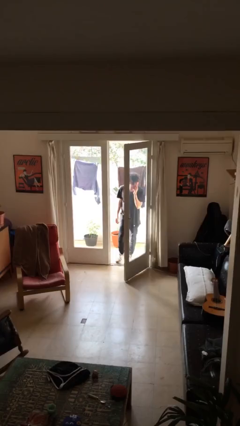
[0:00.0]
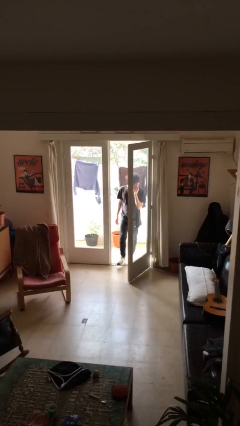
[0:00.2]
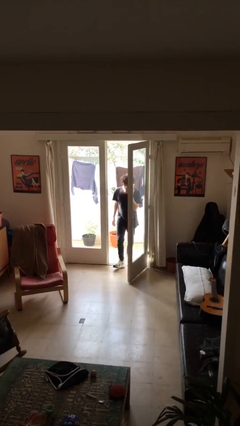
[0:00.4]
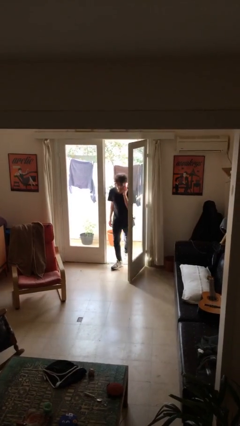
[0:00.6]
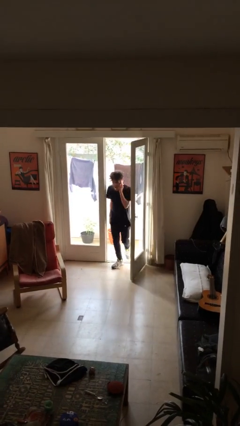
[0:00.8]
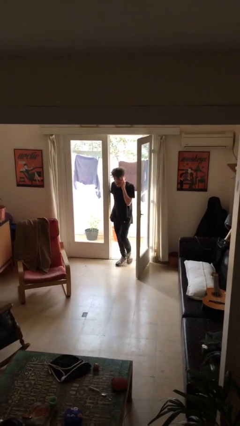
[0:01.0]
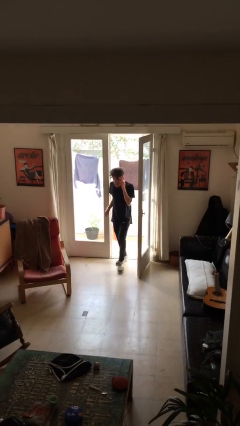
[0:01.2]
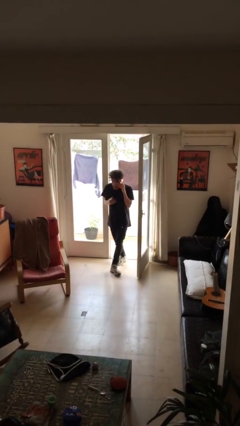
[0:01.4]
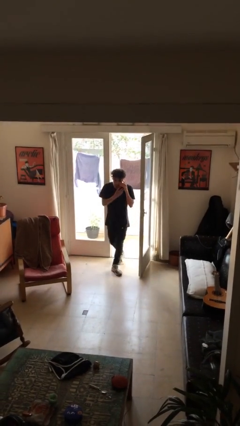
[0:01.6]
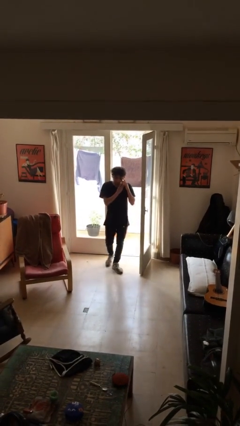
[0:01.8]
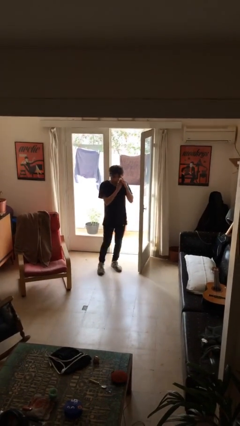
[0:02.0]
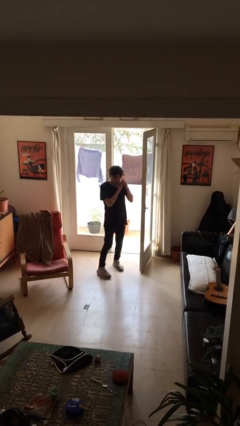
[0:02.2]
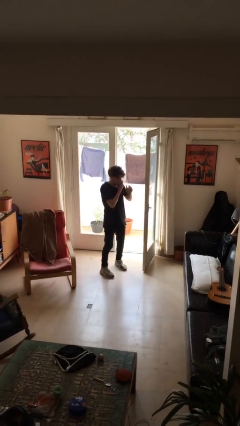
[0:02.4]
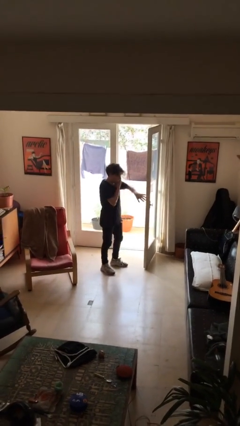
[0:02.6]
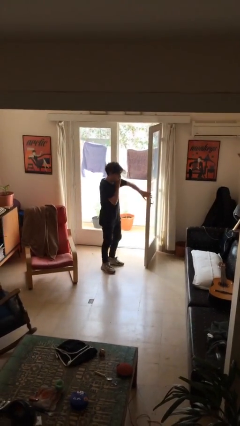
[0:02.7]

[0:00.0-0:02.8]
person enters scene through structure

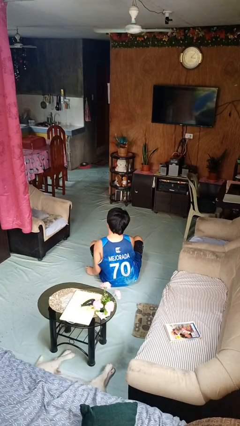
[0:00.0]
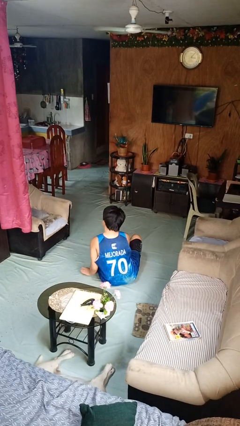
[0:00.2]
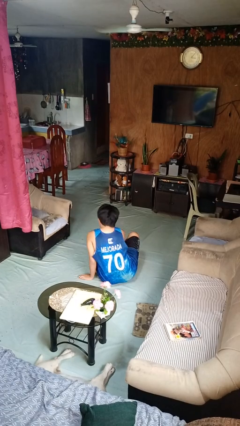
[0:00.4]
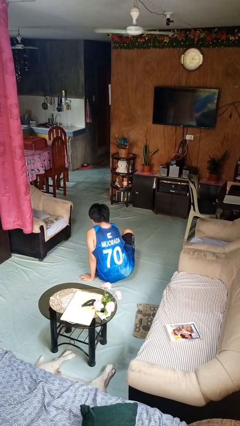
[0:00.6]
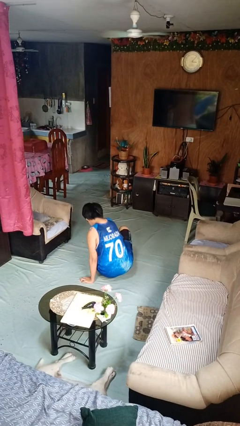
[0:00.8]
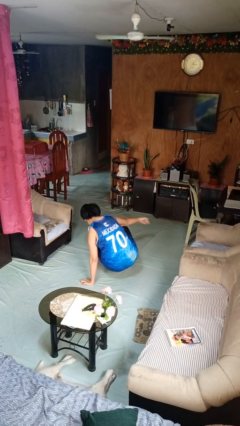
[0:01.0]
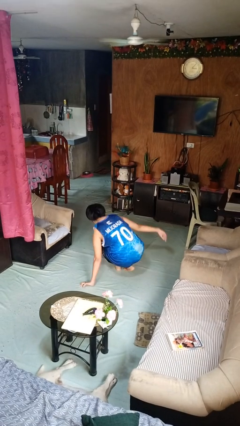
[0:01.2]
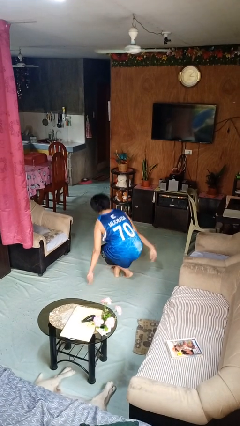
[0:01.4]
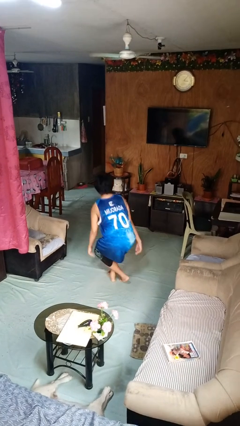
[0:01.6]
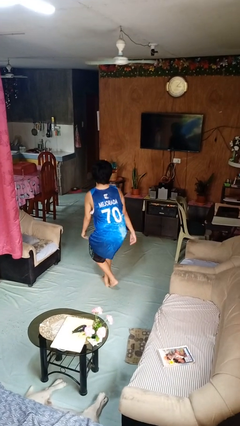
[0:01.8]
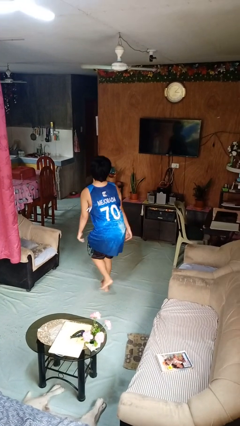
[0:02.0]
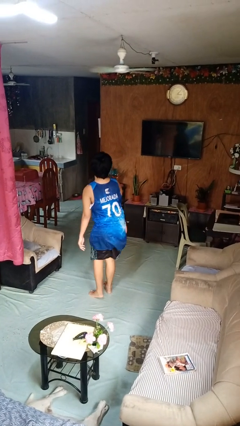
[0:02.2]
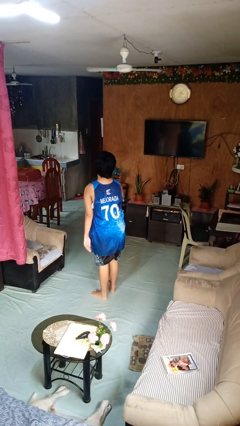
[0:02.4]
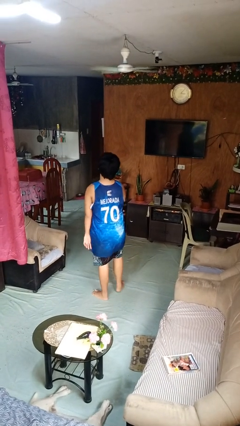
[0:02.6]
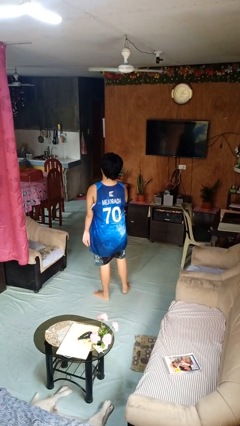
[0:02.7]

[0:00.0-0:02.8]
person stands up from floor

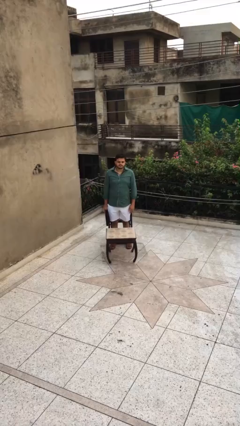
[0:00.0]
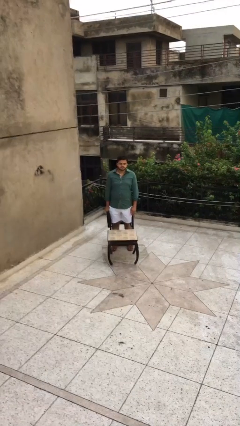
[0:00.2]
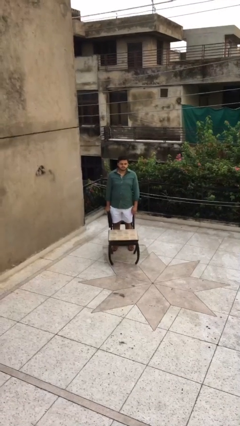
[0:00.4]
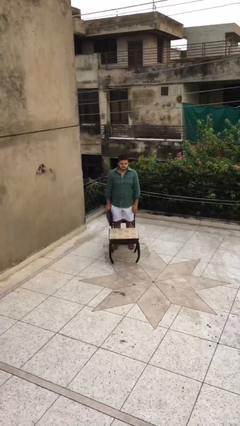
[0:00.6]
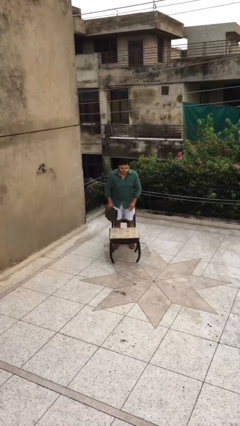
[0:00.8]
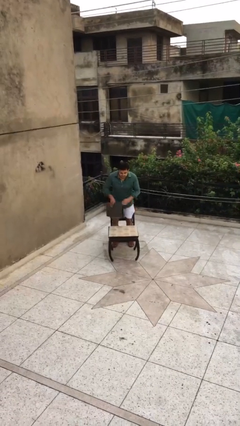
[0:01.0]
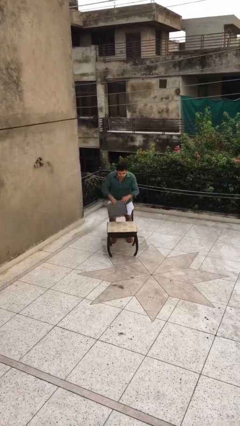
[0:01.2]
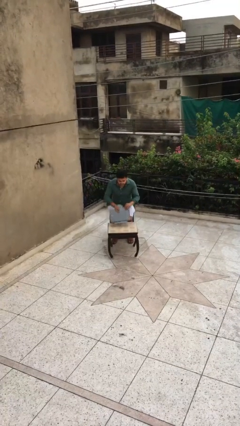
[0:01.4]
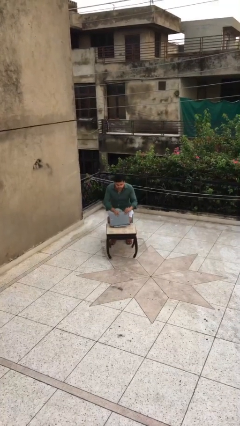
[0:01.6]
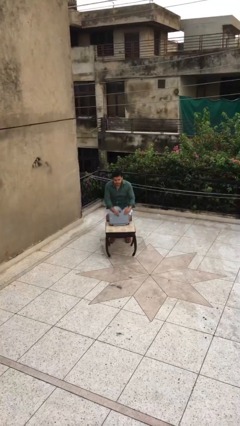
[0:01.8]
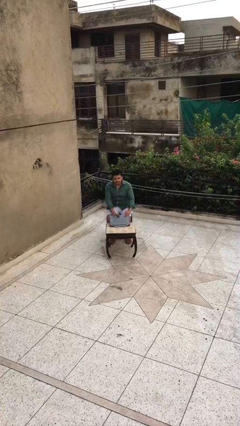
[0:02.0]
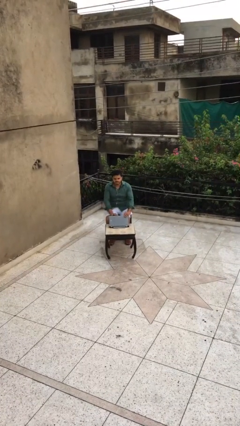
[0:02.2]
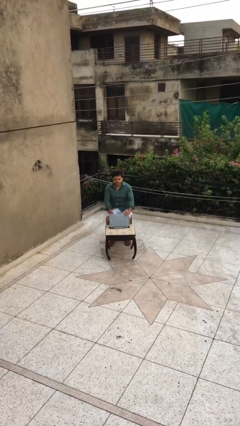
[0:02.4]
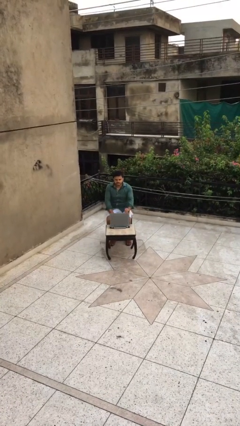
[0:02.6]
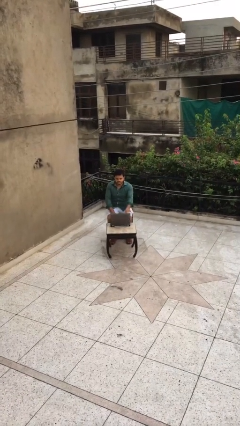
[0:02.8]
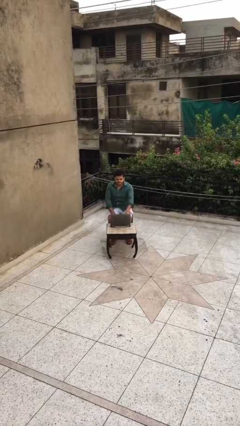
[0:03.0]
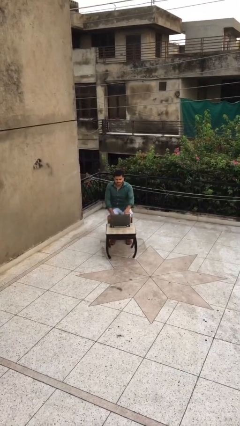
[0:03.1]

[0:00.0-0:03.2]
person sits down

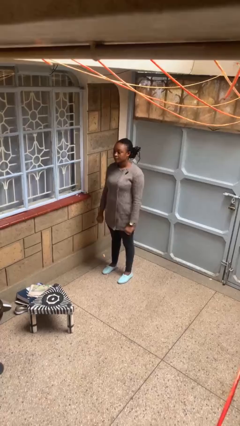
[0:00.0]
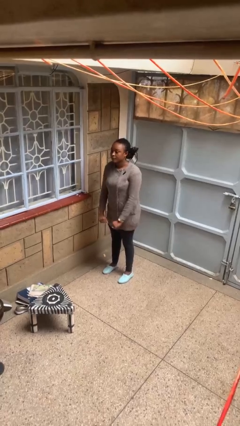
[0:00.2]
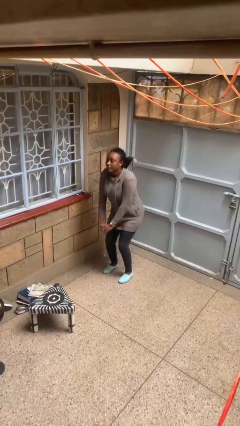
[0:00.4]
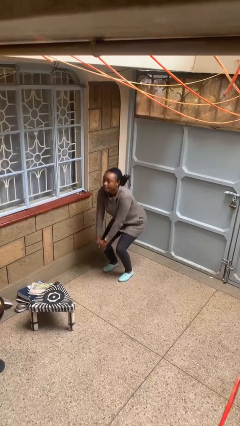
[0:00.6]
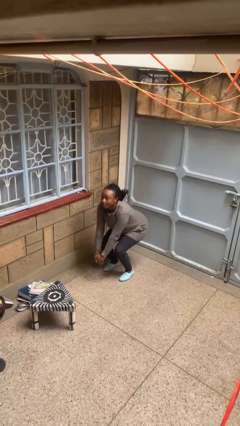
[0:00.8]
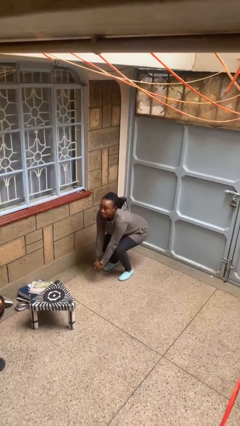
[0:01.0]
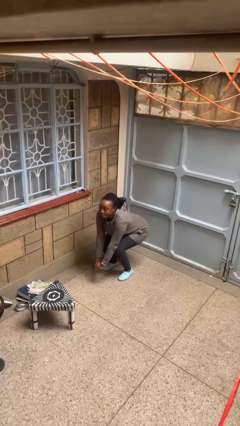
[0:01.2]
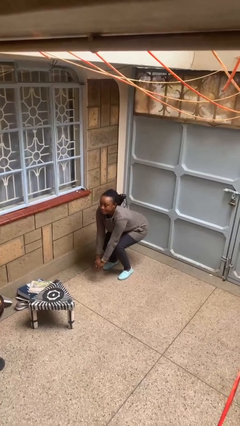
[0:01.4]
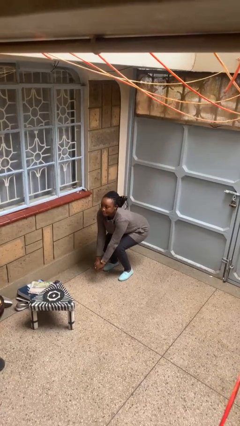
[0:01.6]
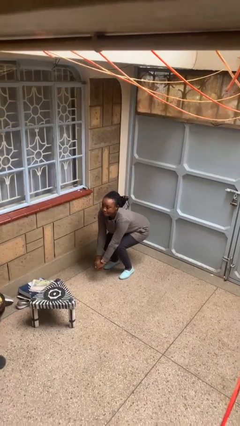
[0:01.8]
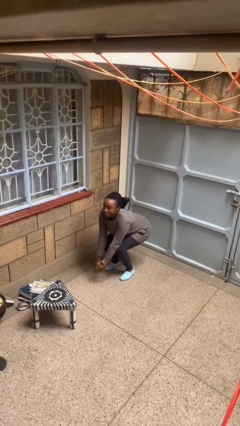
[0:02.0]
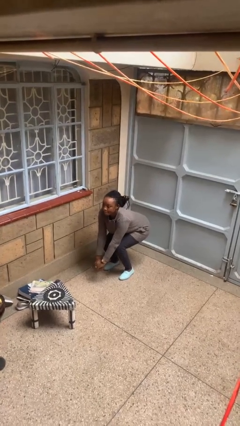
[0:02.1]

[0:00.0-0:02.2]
person squats

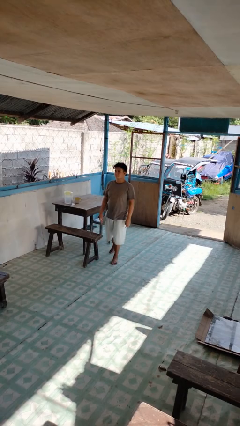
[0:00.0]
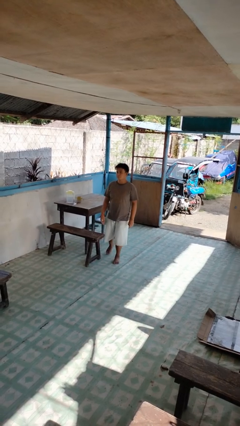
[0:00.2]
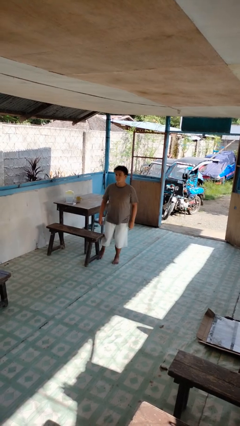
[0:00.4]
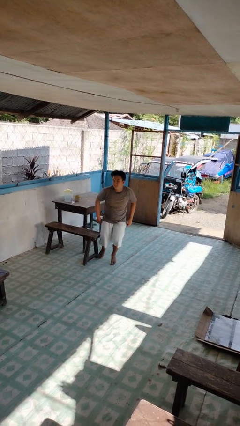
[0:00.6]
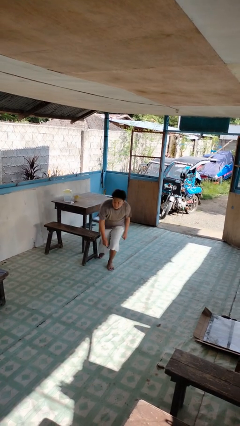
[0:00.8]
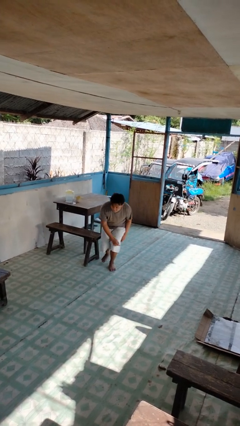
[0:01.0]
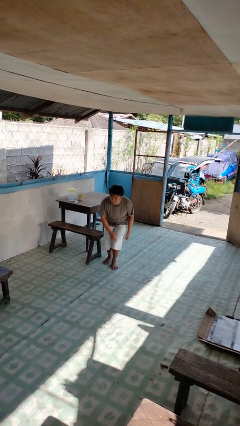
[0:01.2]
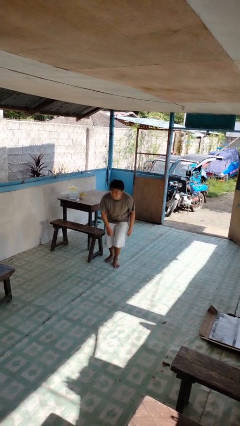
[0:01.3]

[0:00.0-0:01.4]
person stubs toe

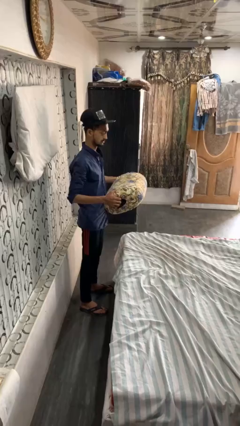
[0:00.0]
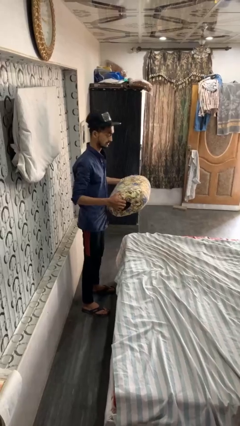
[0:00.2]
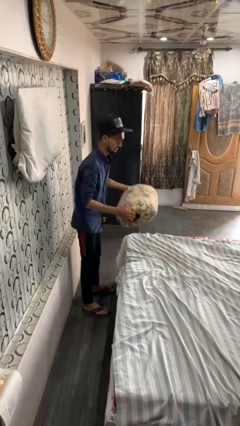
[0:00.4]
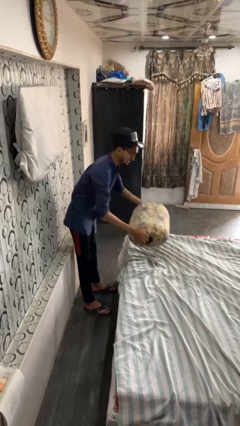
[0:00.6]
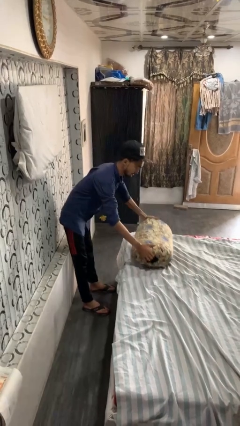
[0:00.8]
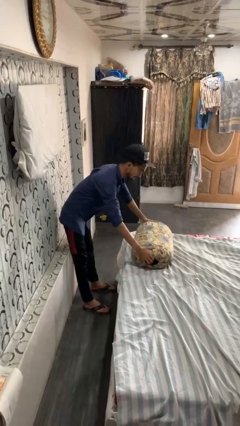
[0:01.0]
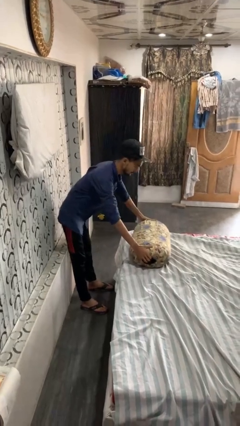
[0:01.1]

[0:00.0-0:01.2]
person puts down object on bed

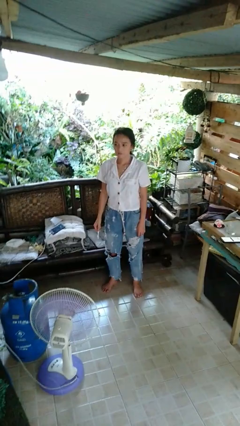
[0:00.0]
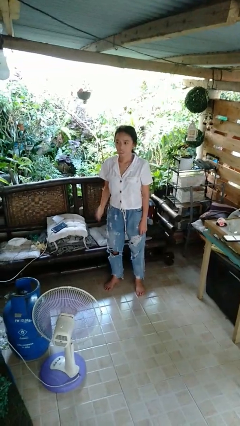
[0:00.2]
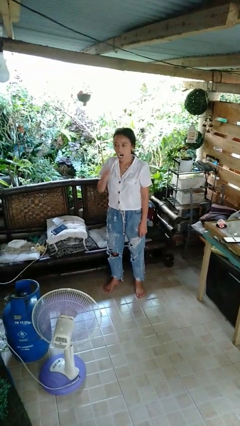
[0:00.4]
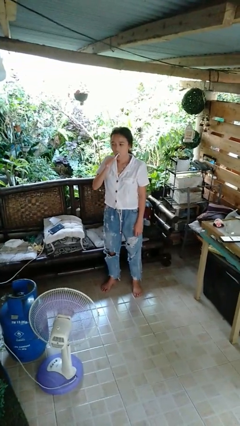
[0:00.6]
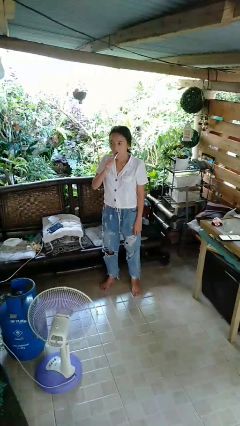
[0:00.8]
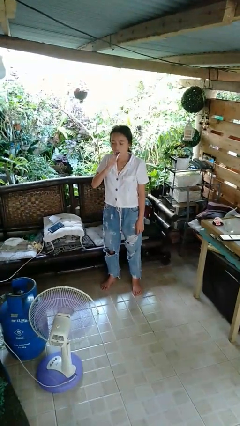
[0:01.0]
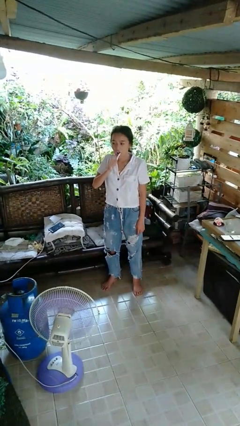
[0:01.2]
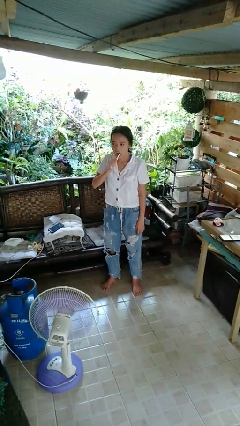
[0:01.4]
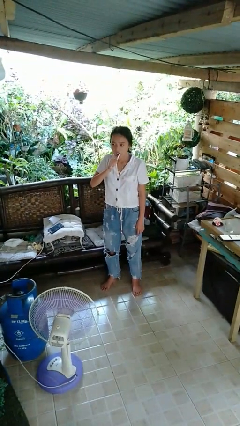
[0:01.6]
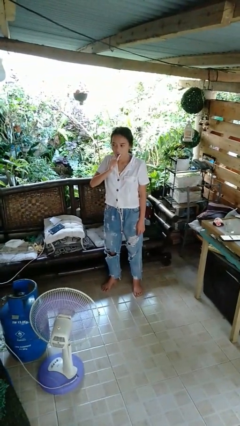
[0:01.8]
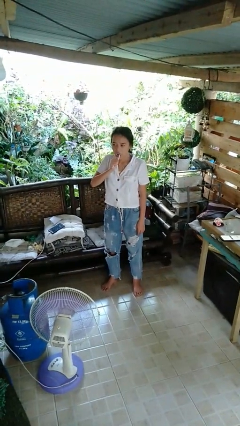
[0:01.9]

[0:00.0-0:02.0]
person brushes teeth

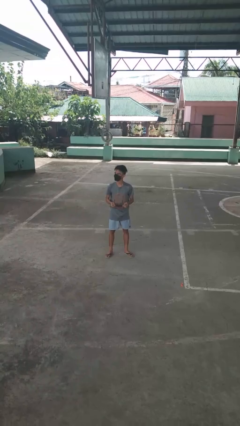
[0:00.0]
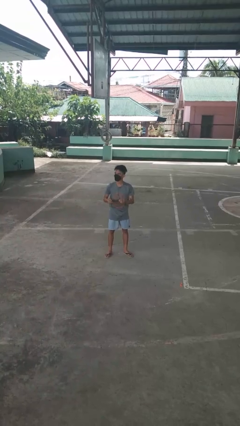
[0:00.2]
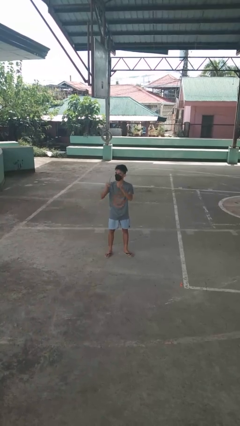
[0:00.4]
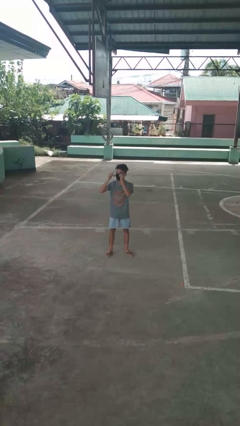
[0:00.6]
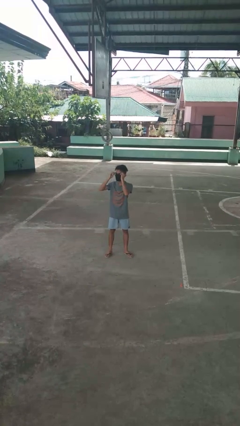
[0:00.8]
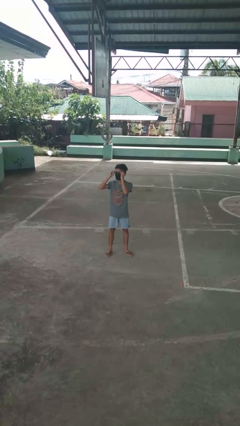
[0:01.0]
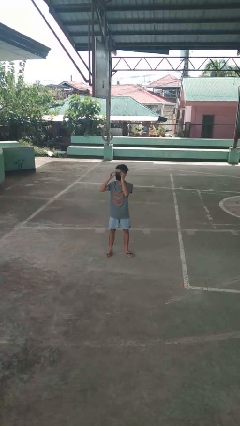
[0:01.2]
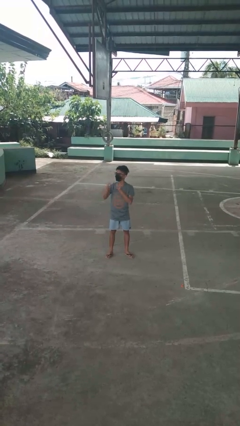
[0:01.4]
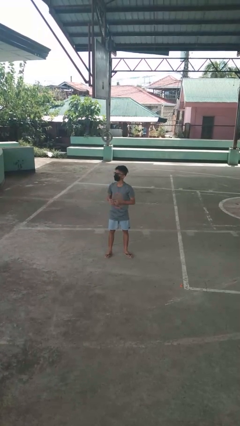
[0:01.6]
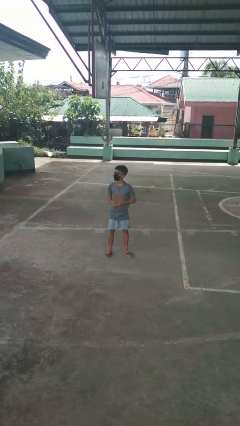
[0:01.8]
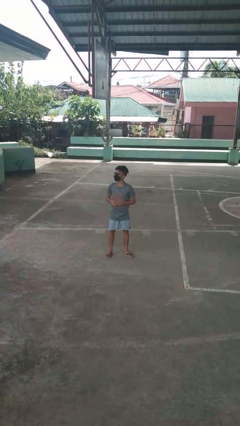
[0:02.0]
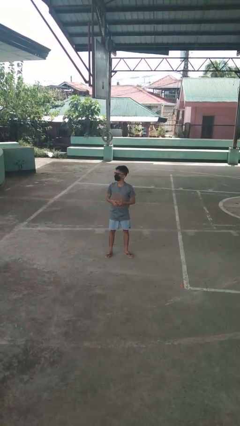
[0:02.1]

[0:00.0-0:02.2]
person puts on glasses
